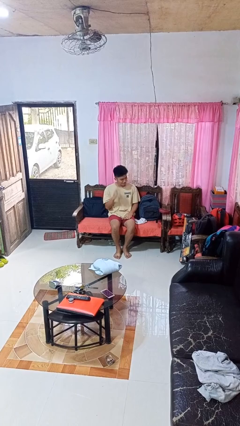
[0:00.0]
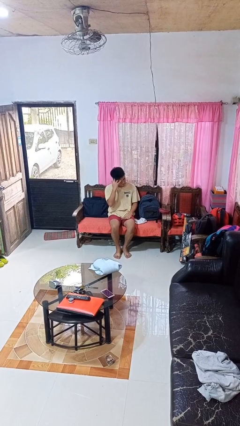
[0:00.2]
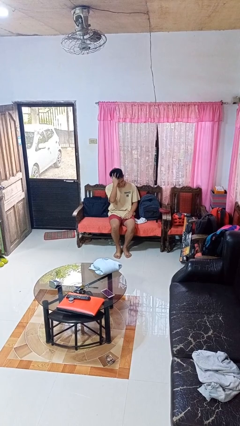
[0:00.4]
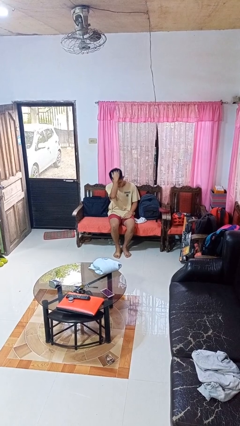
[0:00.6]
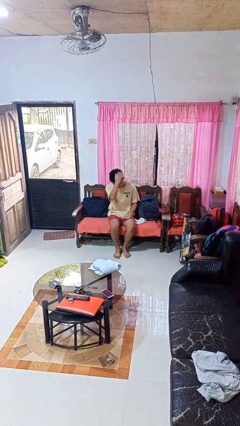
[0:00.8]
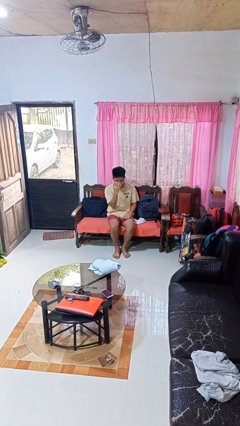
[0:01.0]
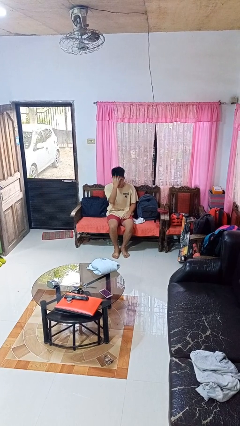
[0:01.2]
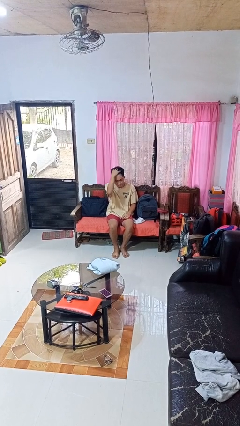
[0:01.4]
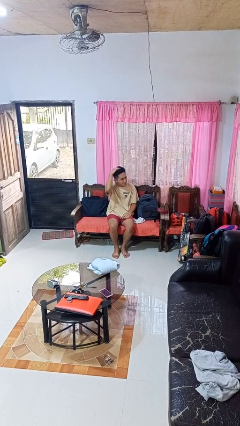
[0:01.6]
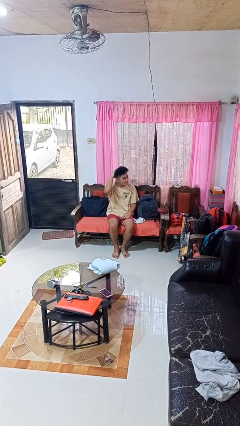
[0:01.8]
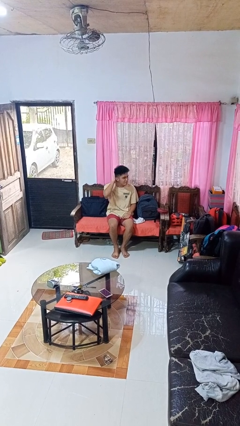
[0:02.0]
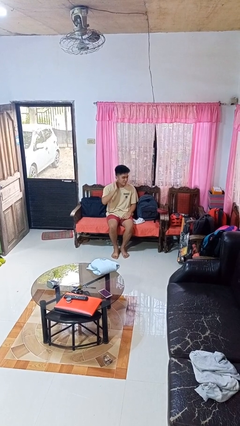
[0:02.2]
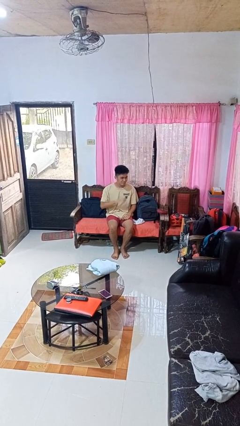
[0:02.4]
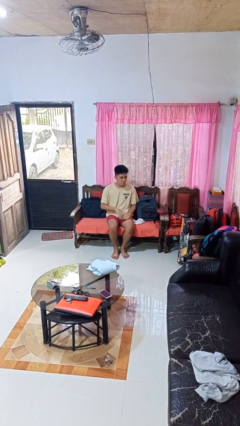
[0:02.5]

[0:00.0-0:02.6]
person strokes hair

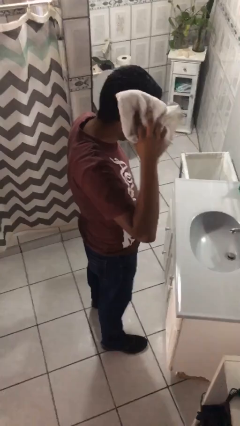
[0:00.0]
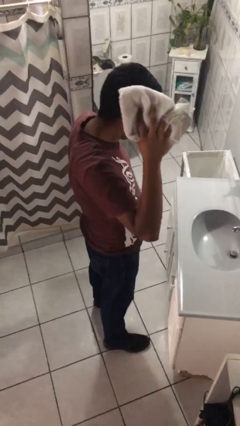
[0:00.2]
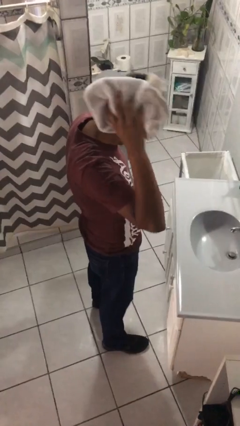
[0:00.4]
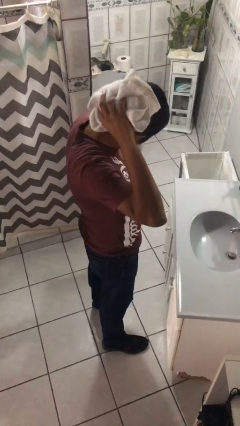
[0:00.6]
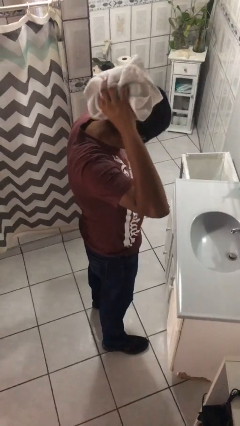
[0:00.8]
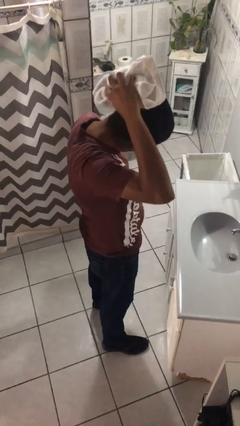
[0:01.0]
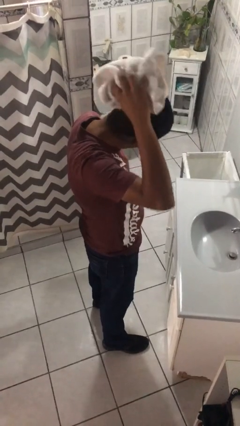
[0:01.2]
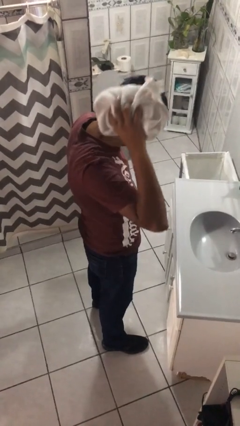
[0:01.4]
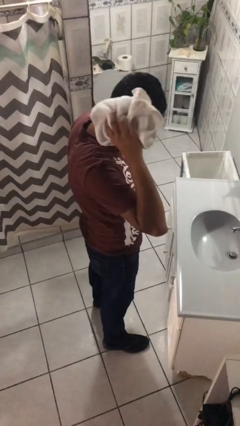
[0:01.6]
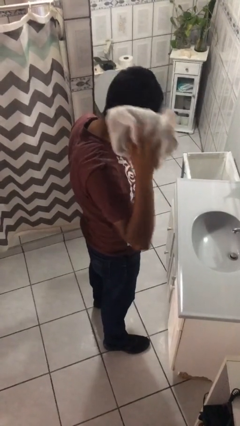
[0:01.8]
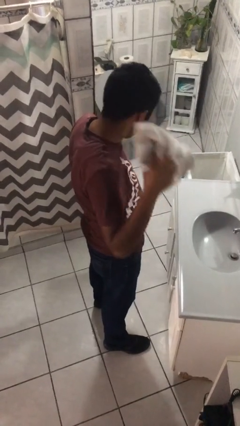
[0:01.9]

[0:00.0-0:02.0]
person dries hair with towel

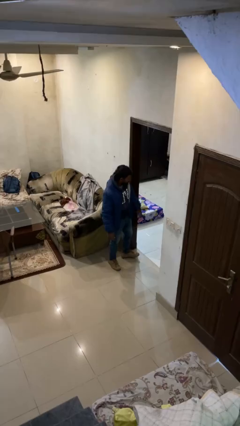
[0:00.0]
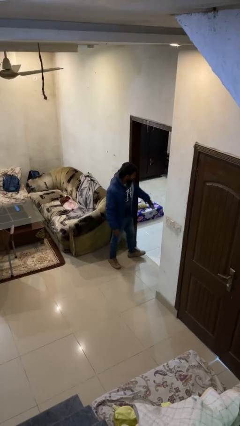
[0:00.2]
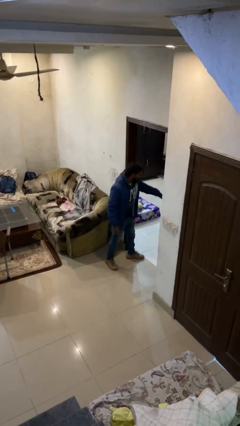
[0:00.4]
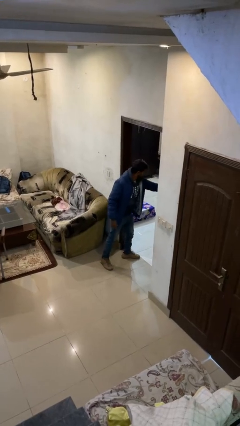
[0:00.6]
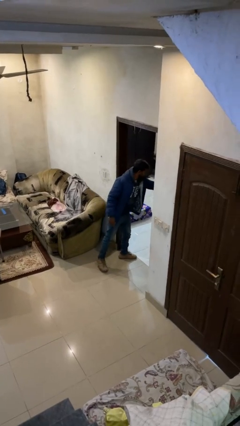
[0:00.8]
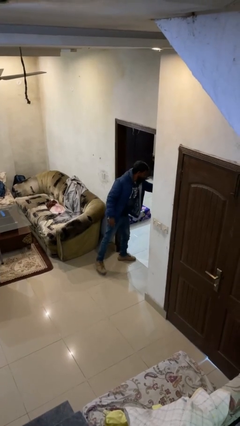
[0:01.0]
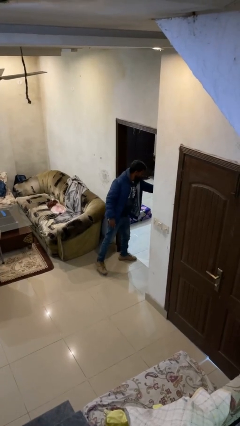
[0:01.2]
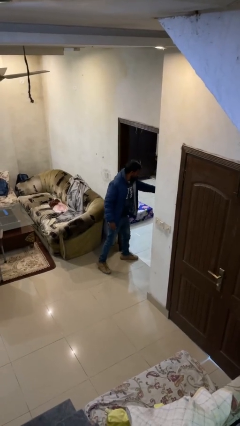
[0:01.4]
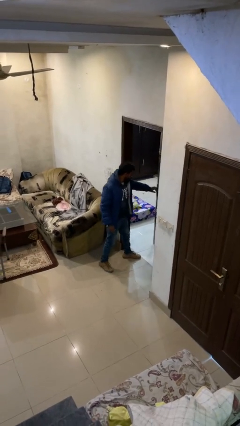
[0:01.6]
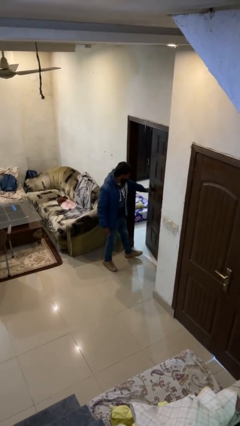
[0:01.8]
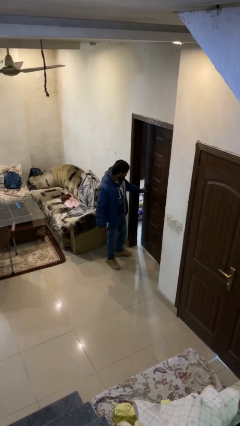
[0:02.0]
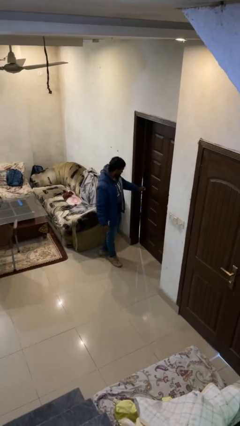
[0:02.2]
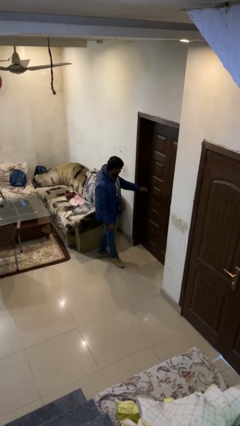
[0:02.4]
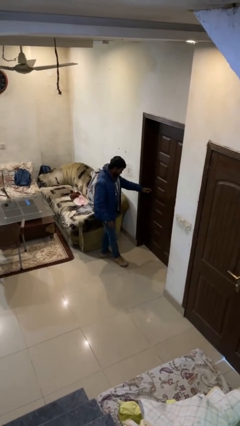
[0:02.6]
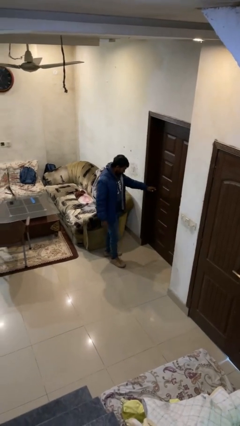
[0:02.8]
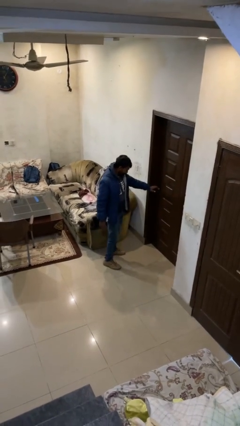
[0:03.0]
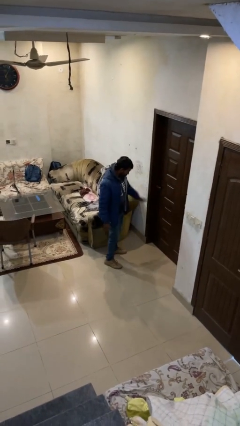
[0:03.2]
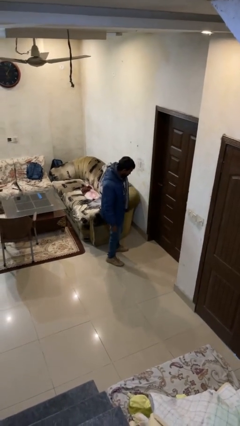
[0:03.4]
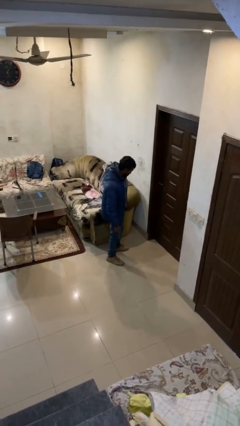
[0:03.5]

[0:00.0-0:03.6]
person closes facility door

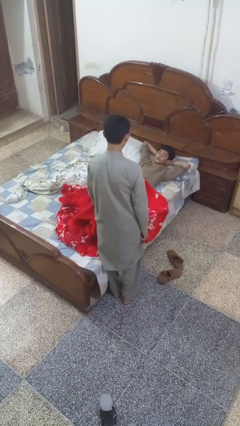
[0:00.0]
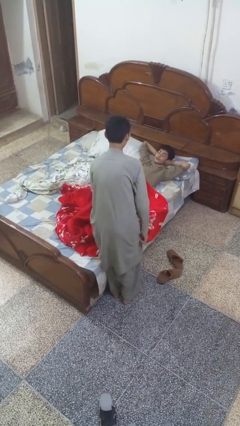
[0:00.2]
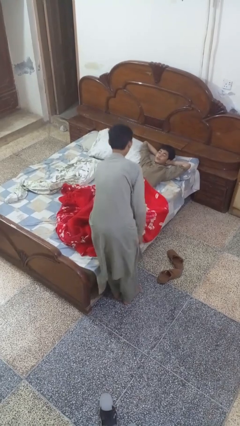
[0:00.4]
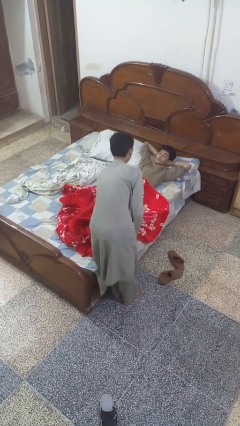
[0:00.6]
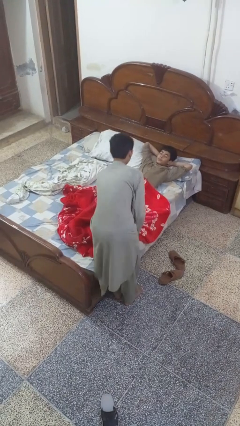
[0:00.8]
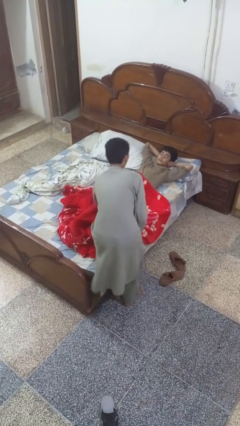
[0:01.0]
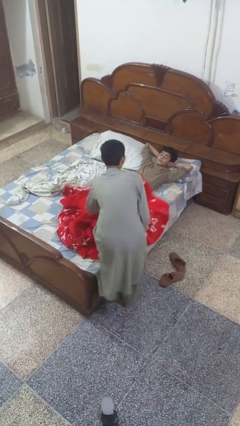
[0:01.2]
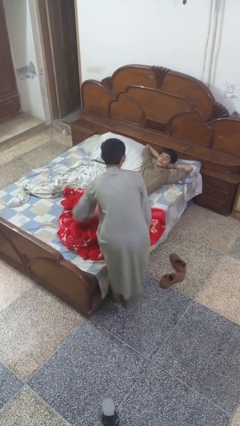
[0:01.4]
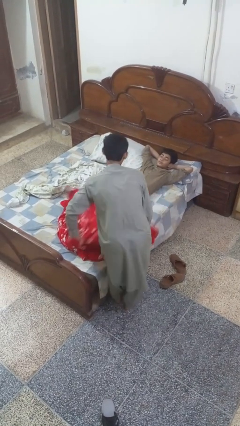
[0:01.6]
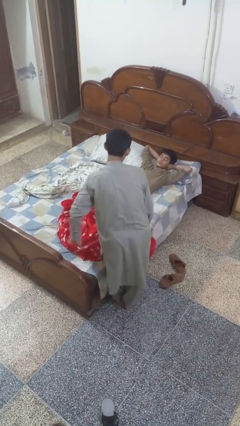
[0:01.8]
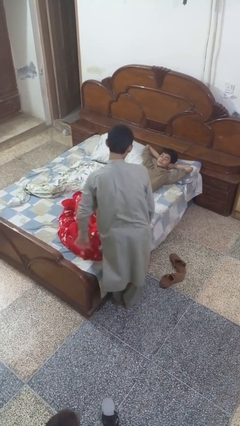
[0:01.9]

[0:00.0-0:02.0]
person uncovers friend with blanket

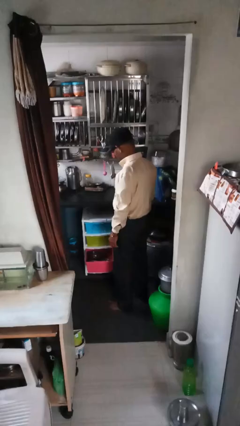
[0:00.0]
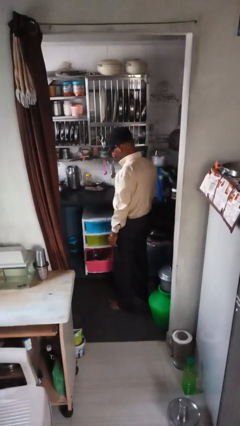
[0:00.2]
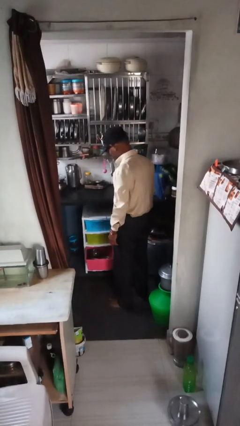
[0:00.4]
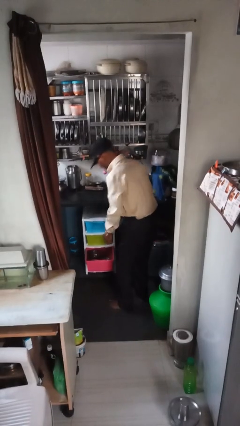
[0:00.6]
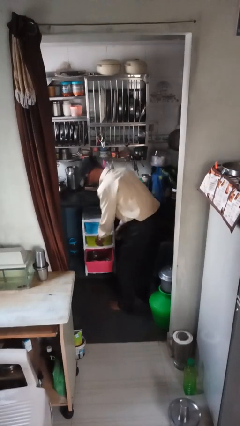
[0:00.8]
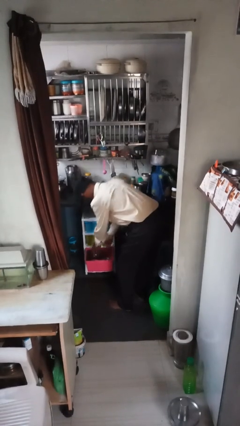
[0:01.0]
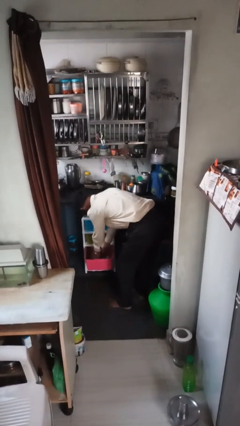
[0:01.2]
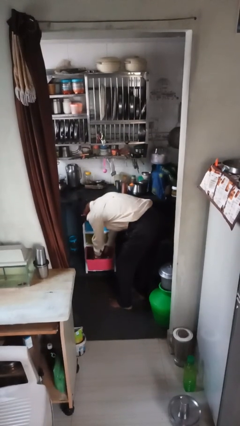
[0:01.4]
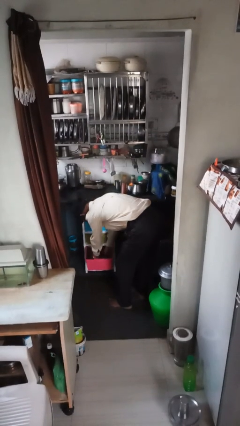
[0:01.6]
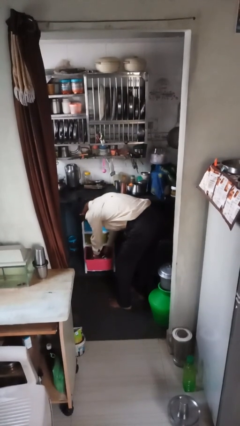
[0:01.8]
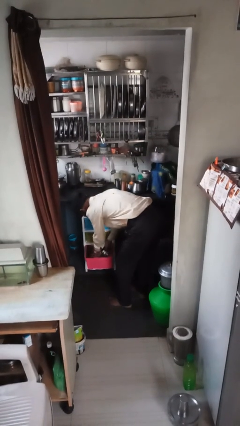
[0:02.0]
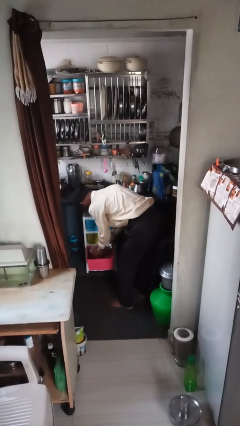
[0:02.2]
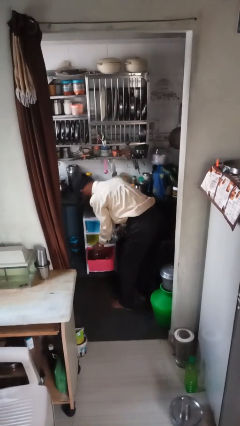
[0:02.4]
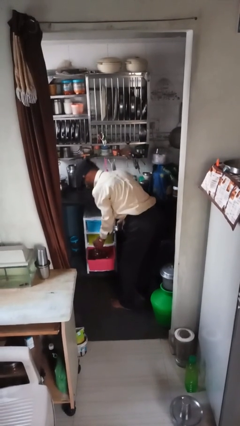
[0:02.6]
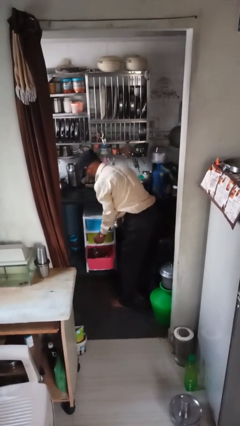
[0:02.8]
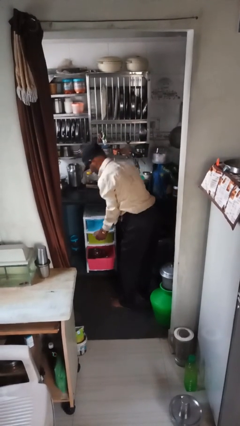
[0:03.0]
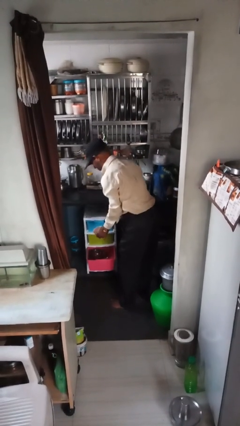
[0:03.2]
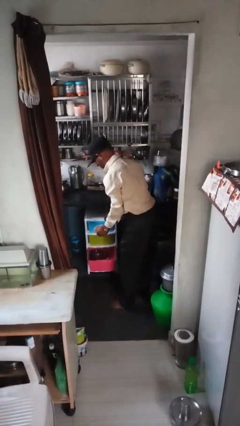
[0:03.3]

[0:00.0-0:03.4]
person takes object from kitchen drawer

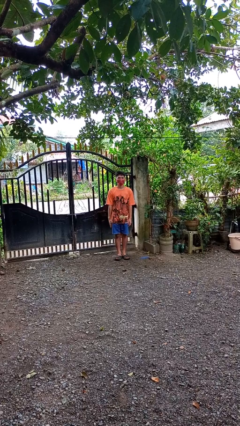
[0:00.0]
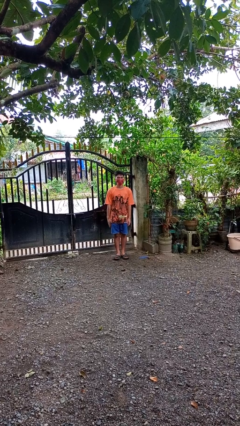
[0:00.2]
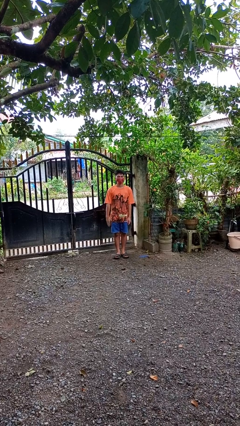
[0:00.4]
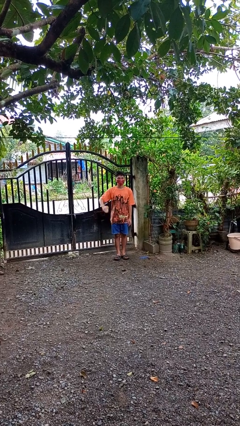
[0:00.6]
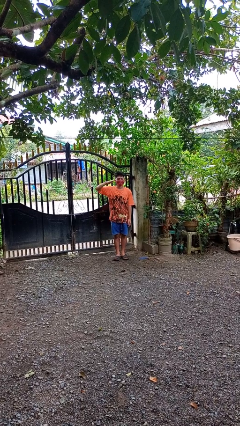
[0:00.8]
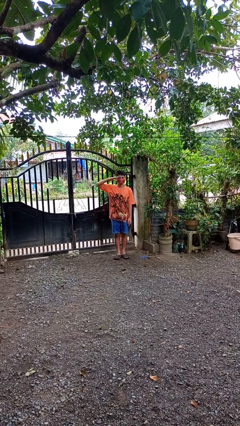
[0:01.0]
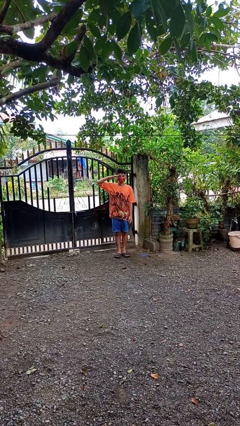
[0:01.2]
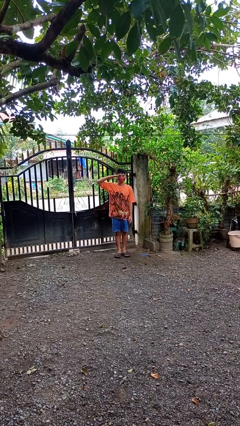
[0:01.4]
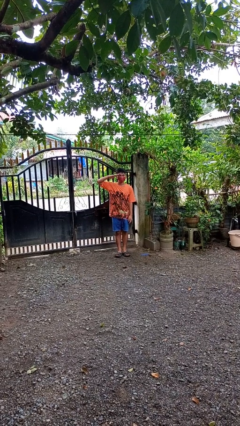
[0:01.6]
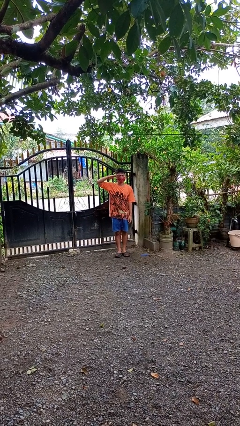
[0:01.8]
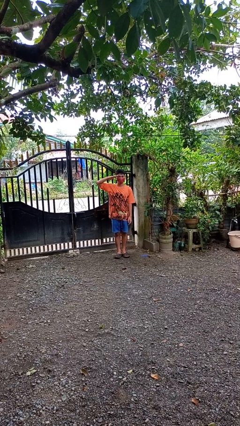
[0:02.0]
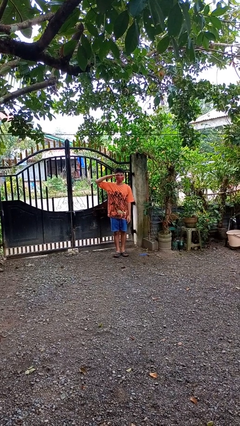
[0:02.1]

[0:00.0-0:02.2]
person salutes

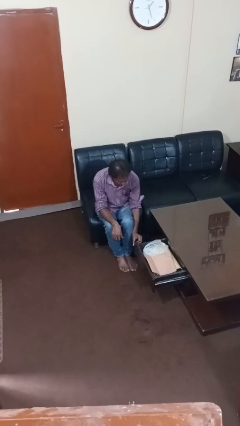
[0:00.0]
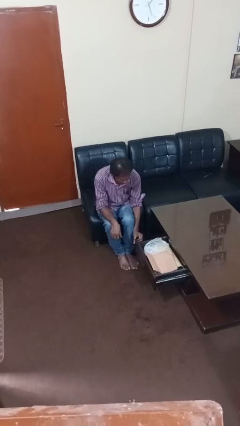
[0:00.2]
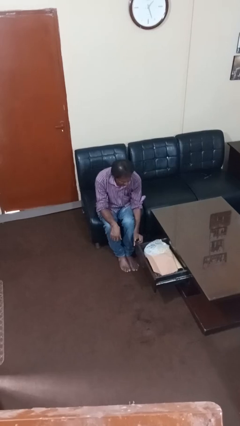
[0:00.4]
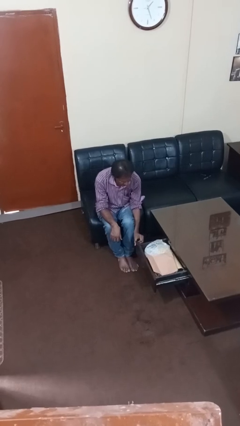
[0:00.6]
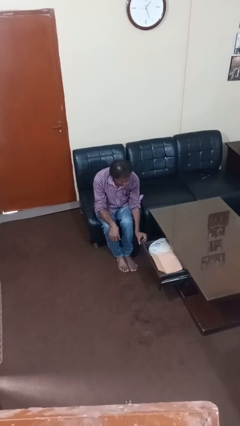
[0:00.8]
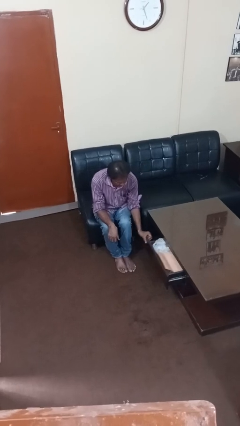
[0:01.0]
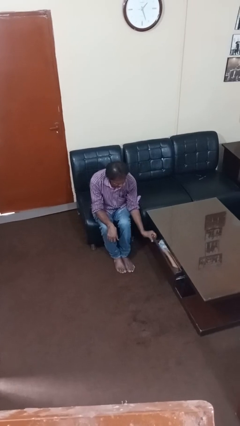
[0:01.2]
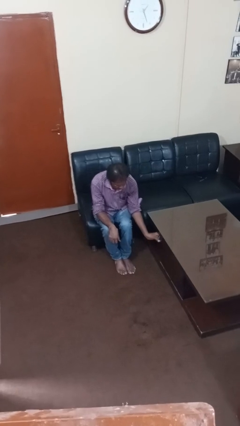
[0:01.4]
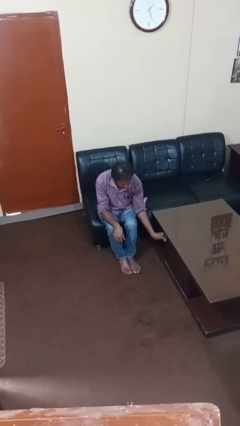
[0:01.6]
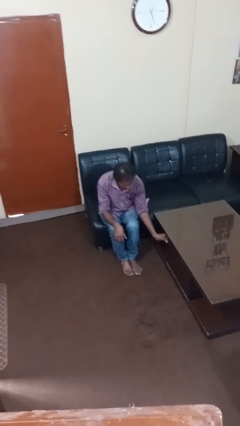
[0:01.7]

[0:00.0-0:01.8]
person closes dresser drawer
